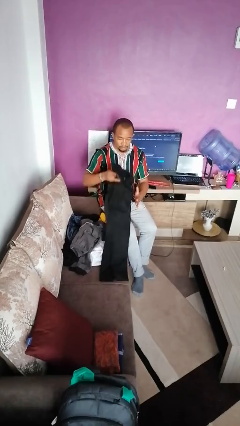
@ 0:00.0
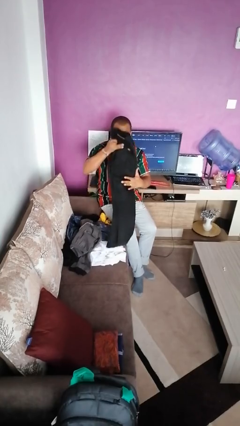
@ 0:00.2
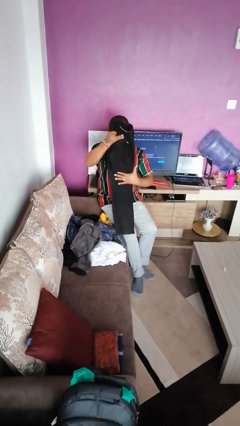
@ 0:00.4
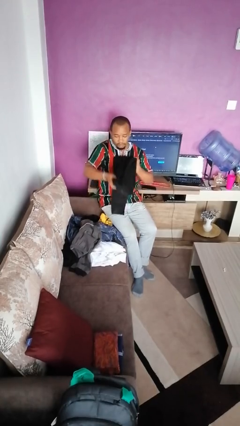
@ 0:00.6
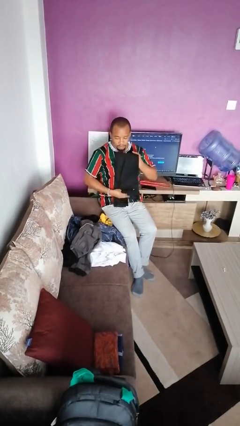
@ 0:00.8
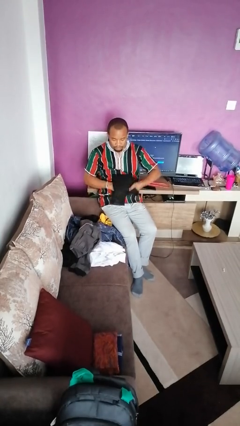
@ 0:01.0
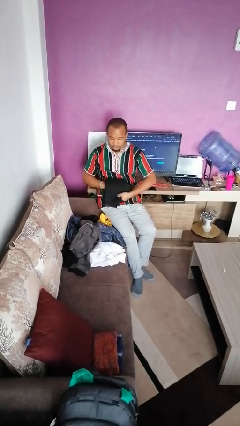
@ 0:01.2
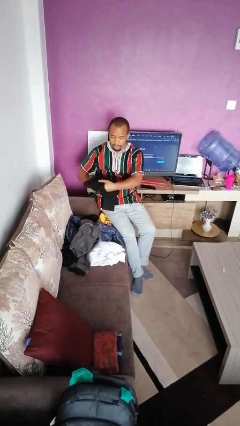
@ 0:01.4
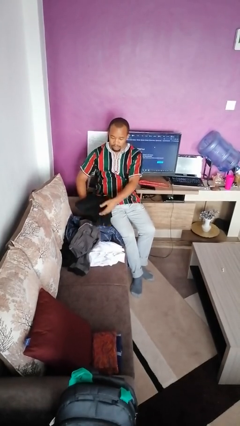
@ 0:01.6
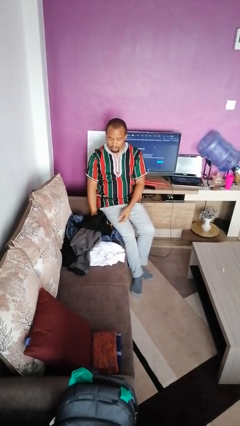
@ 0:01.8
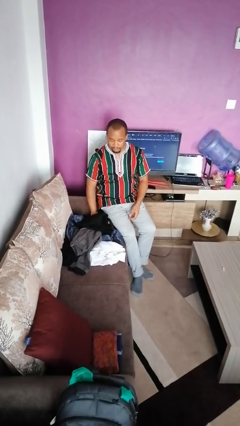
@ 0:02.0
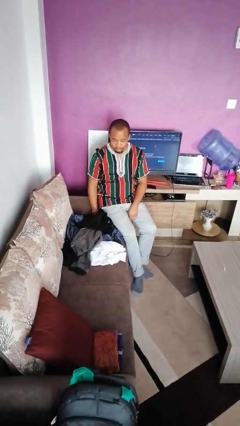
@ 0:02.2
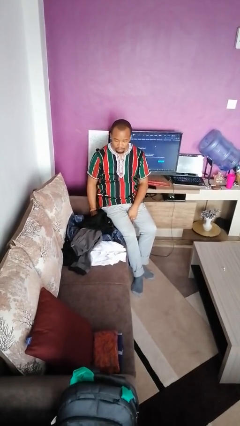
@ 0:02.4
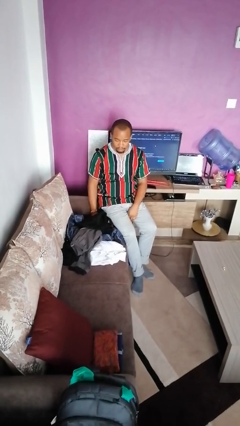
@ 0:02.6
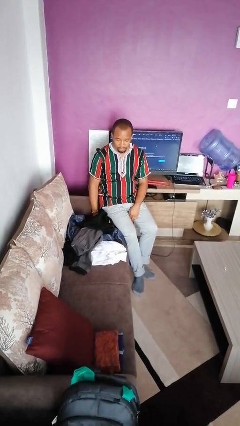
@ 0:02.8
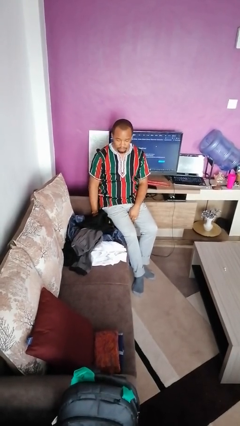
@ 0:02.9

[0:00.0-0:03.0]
person folds pants

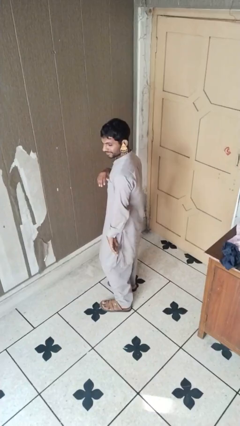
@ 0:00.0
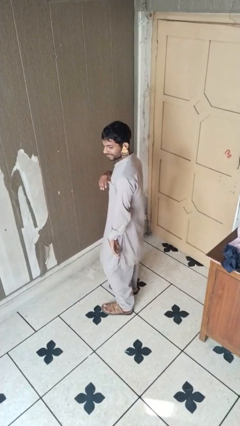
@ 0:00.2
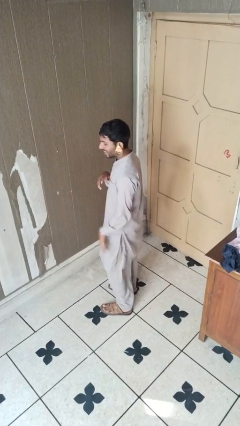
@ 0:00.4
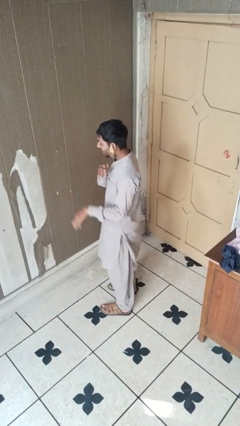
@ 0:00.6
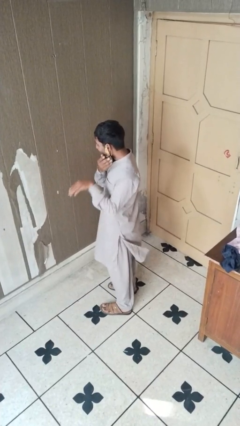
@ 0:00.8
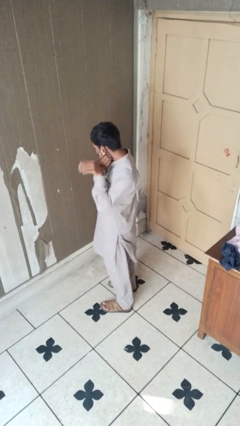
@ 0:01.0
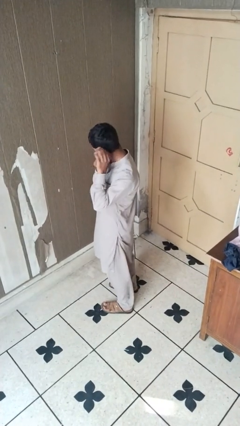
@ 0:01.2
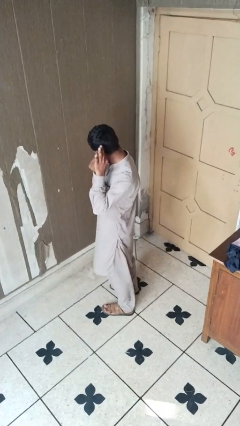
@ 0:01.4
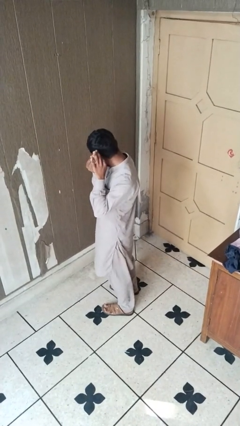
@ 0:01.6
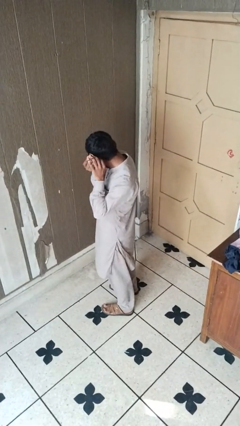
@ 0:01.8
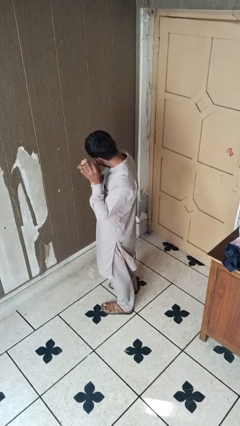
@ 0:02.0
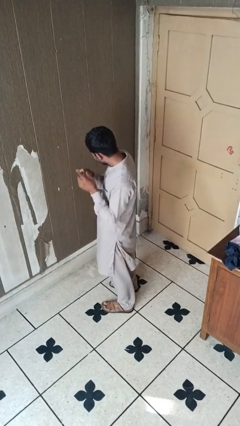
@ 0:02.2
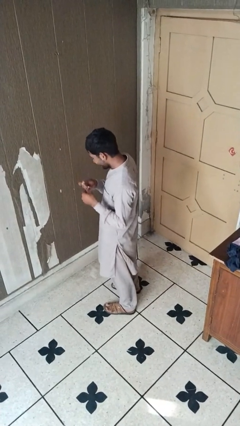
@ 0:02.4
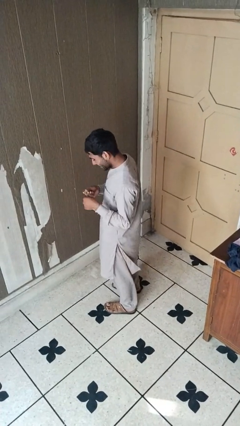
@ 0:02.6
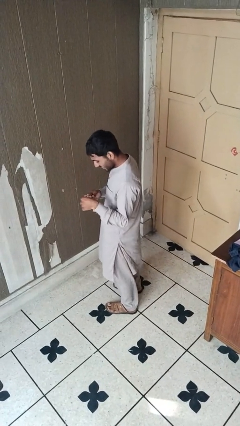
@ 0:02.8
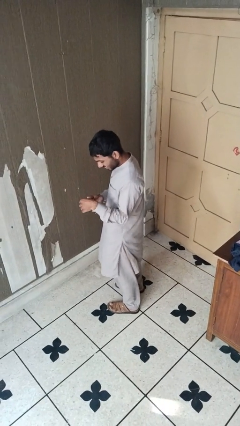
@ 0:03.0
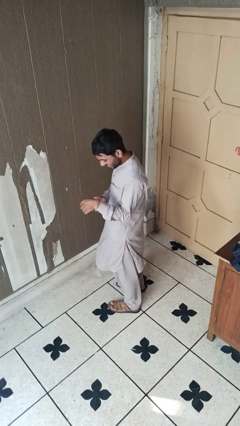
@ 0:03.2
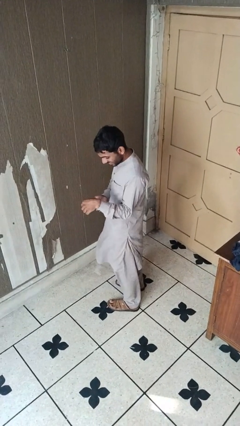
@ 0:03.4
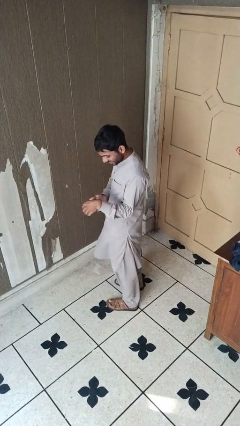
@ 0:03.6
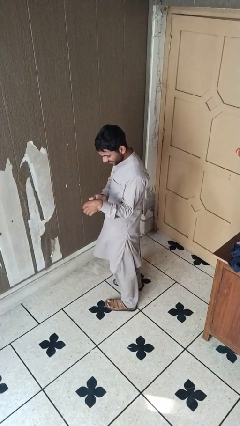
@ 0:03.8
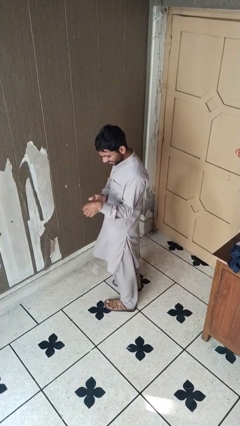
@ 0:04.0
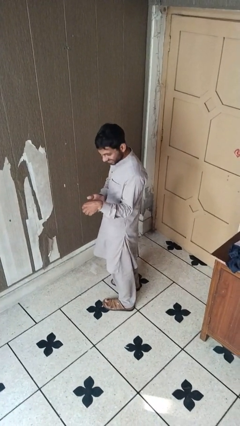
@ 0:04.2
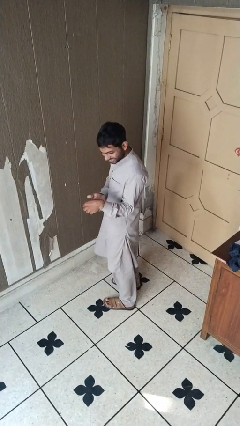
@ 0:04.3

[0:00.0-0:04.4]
person takes off earrings

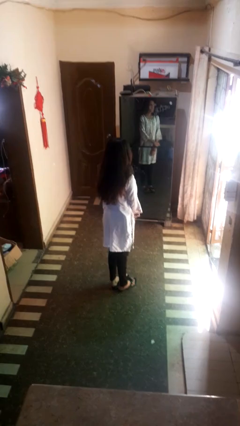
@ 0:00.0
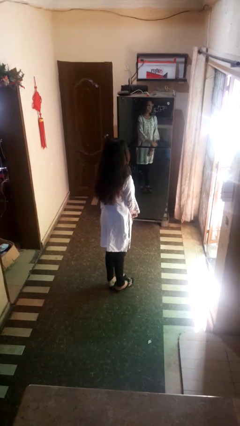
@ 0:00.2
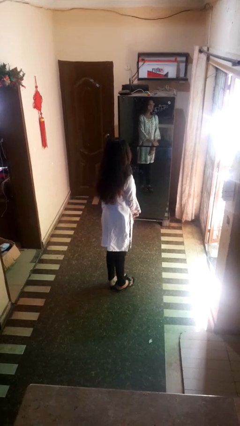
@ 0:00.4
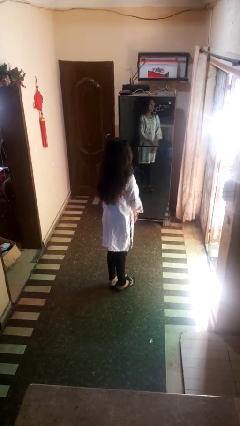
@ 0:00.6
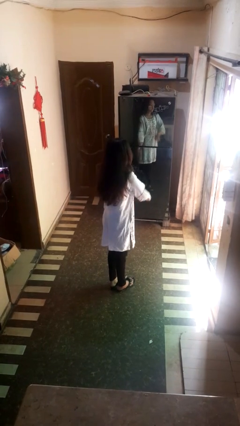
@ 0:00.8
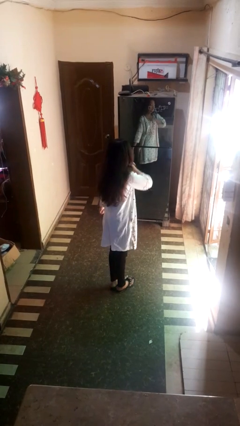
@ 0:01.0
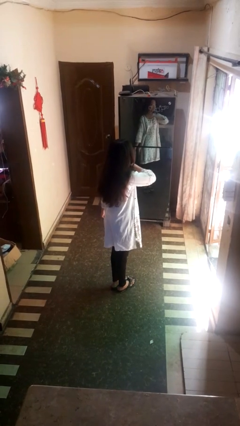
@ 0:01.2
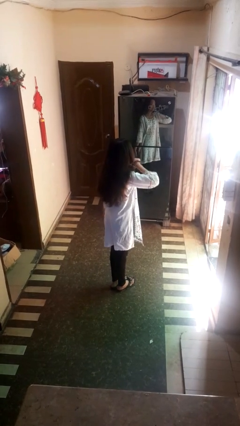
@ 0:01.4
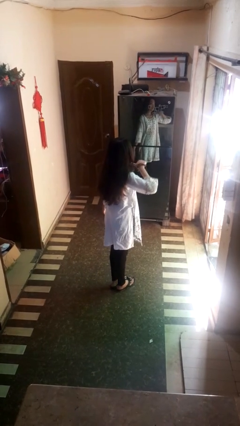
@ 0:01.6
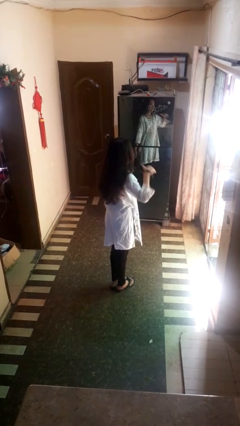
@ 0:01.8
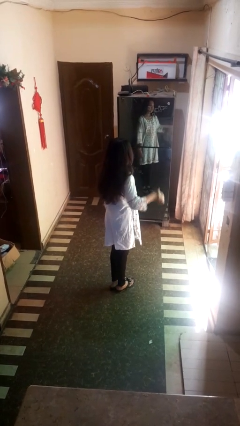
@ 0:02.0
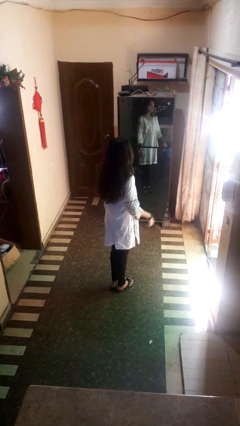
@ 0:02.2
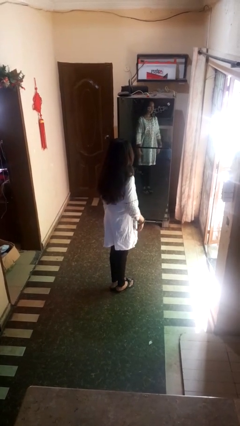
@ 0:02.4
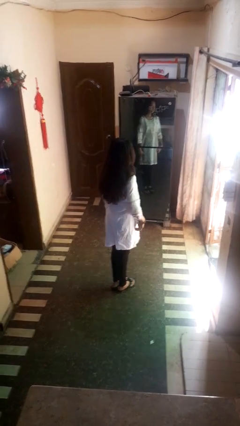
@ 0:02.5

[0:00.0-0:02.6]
person gestures cut

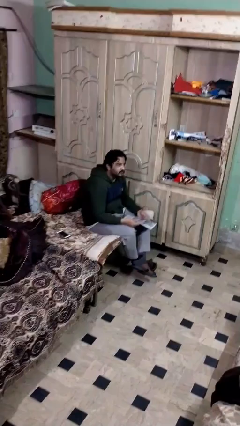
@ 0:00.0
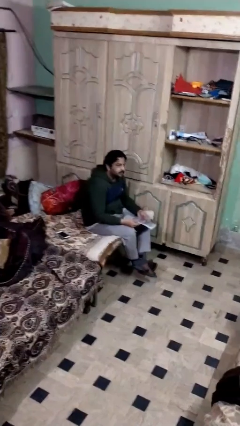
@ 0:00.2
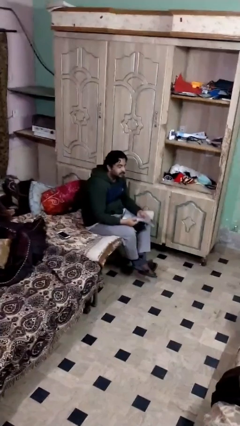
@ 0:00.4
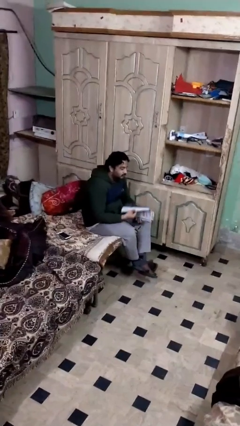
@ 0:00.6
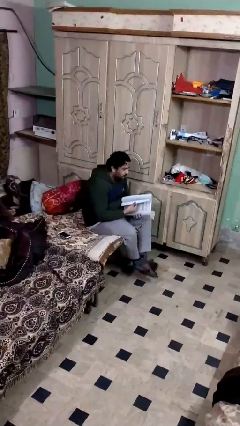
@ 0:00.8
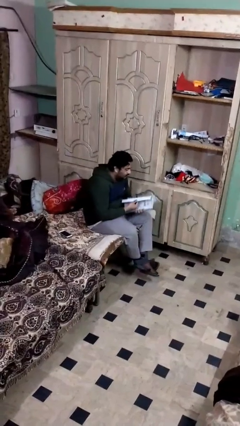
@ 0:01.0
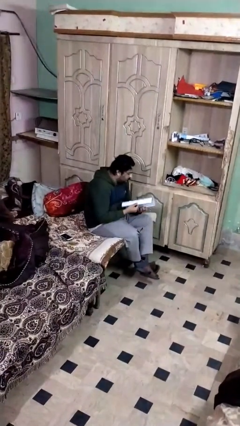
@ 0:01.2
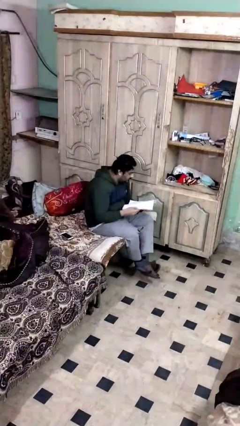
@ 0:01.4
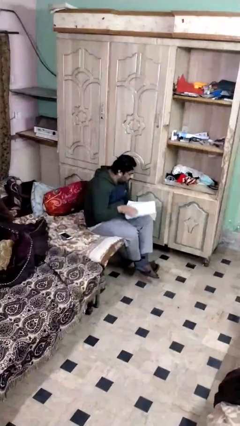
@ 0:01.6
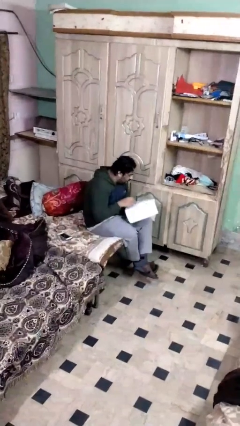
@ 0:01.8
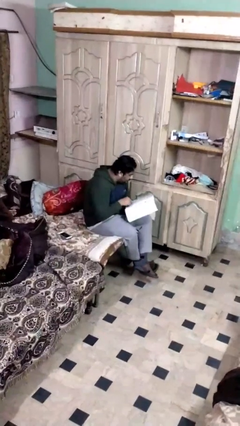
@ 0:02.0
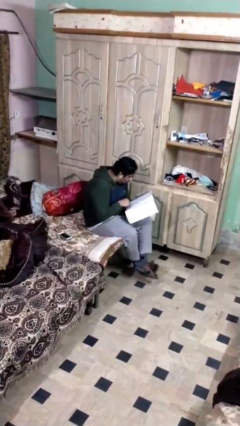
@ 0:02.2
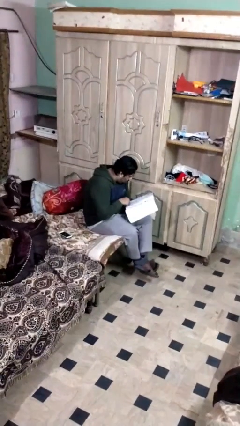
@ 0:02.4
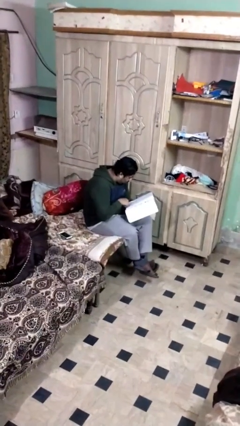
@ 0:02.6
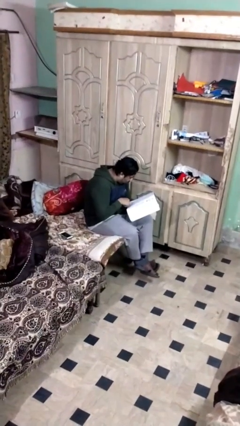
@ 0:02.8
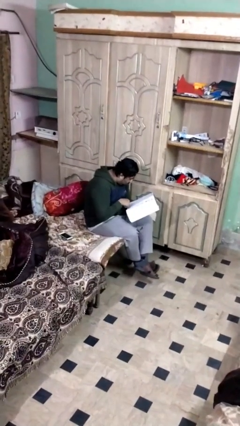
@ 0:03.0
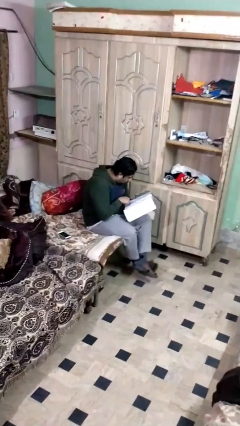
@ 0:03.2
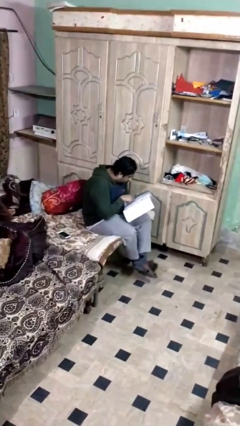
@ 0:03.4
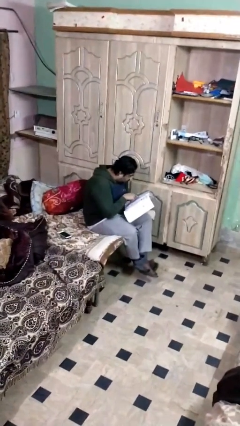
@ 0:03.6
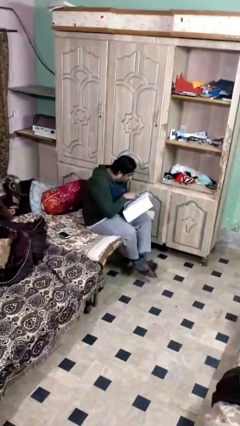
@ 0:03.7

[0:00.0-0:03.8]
person reads document

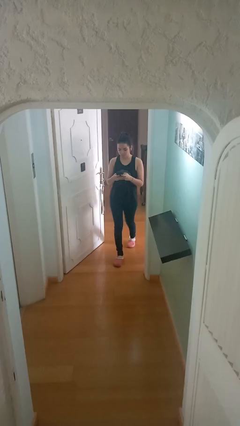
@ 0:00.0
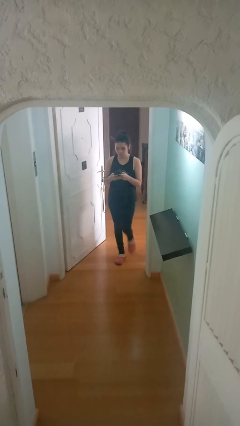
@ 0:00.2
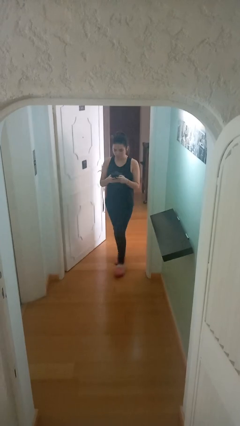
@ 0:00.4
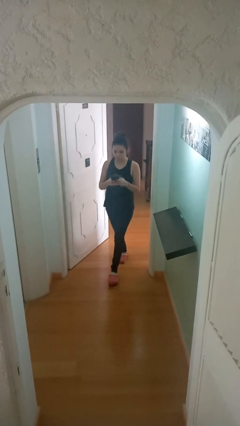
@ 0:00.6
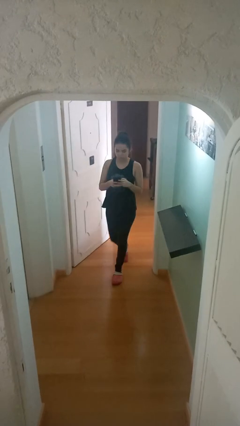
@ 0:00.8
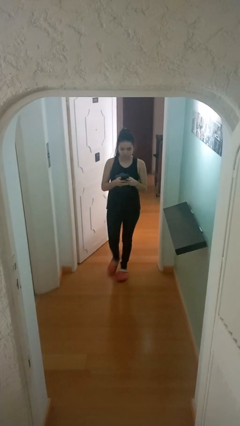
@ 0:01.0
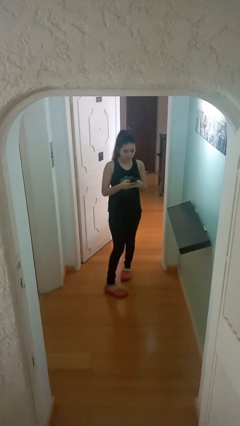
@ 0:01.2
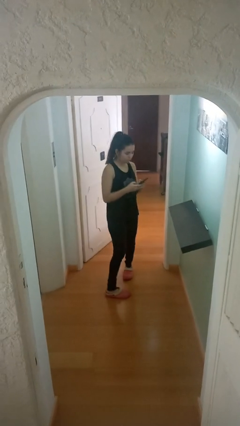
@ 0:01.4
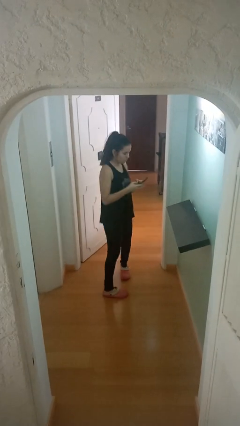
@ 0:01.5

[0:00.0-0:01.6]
person enters scene through structure

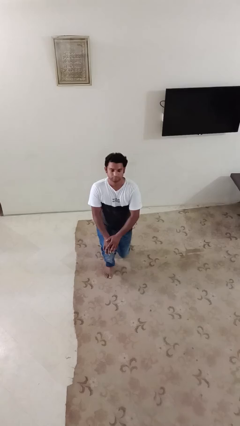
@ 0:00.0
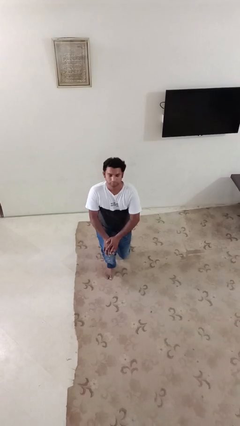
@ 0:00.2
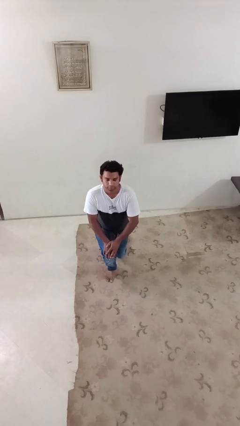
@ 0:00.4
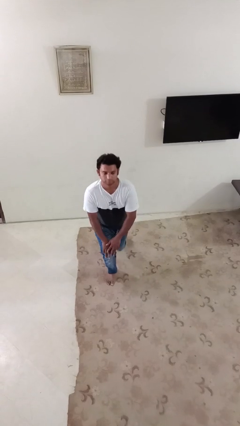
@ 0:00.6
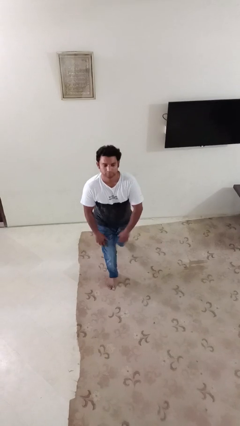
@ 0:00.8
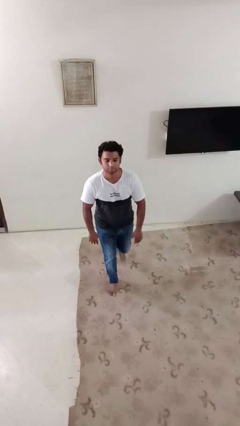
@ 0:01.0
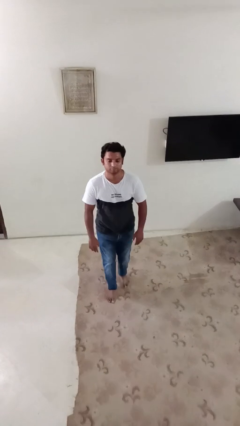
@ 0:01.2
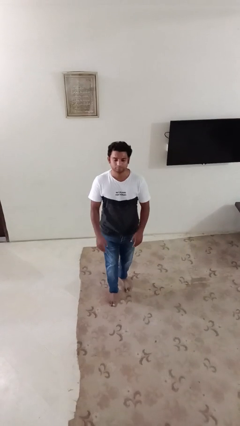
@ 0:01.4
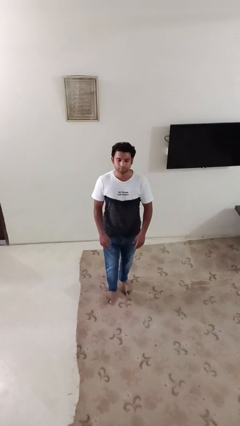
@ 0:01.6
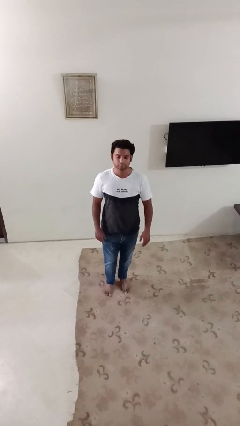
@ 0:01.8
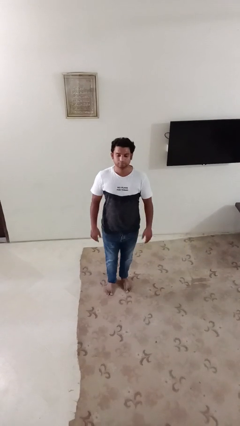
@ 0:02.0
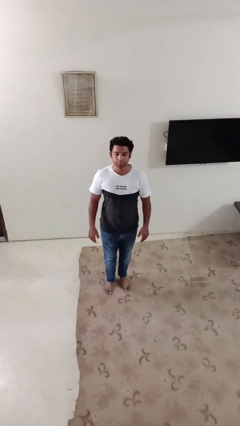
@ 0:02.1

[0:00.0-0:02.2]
person stands up from floor
